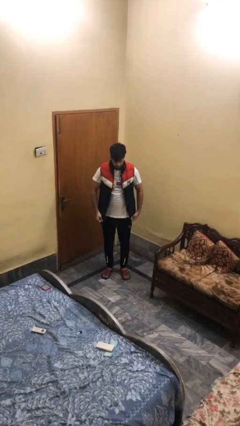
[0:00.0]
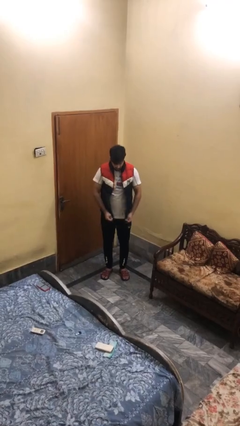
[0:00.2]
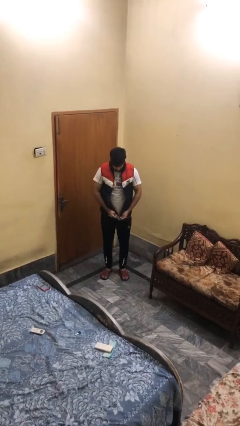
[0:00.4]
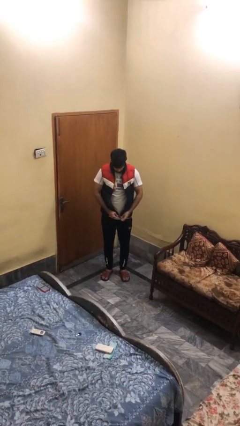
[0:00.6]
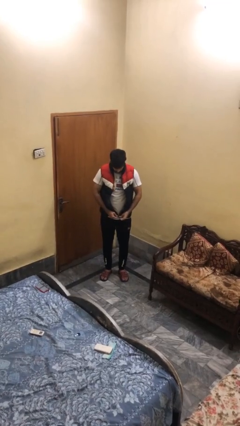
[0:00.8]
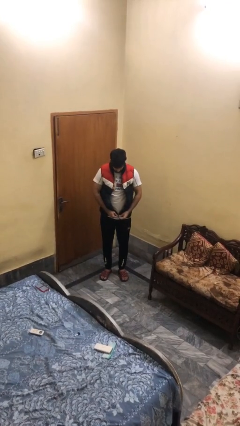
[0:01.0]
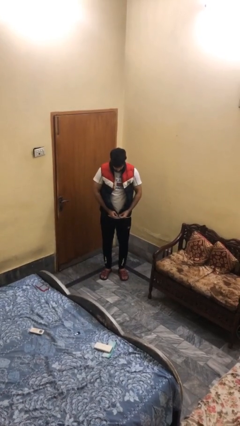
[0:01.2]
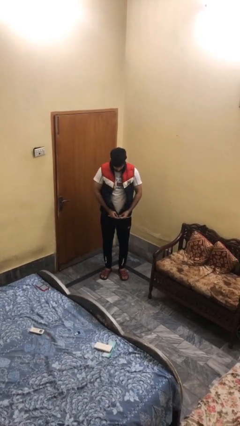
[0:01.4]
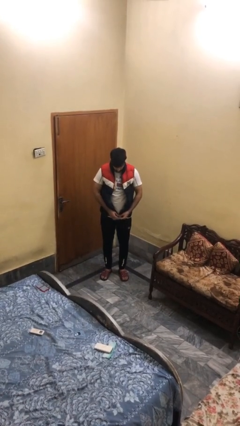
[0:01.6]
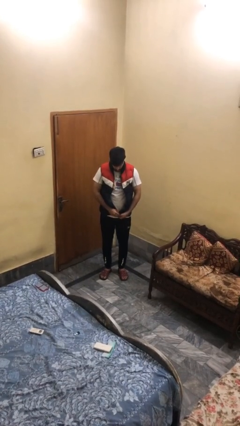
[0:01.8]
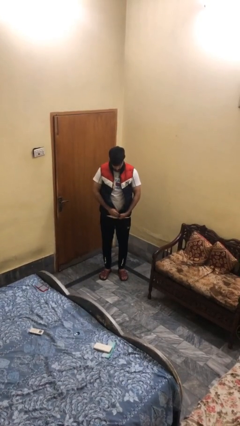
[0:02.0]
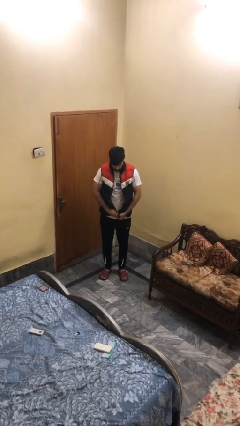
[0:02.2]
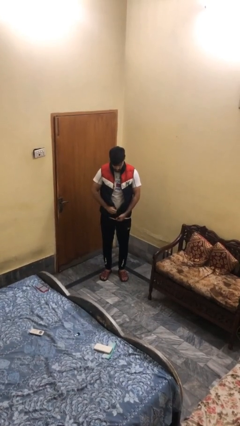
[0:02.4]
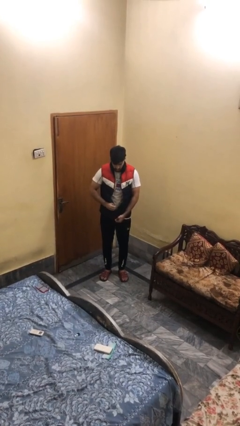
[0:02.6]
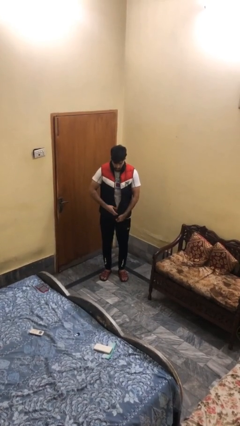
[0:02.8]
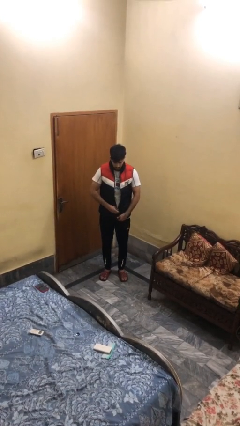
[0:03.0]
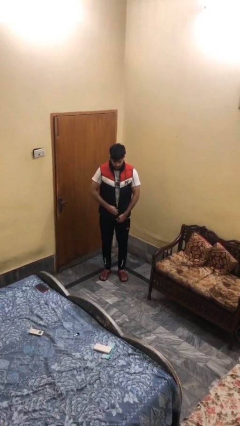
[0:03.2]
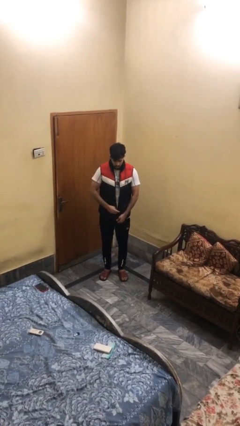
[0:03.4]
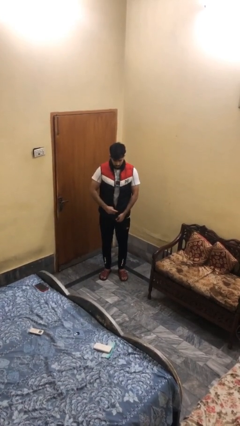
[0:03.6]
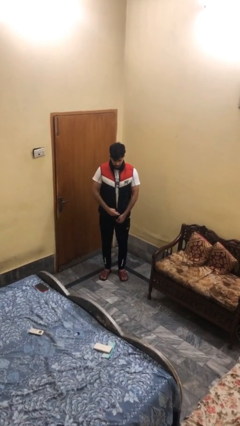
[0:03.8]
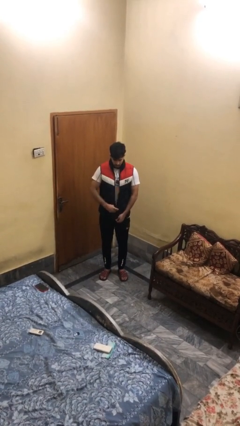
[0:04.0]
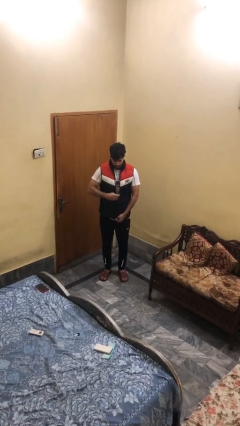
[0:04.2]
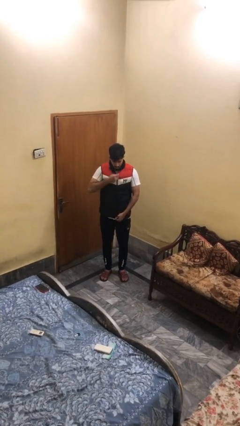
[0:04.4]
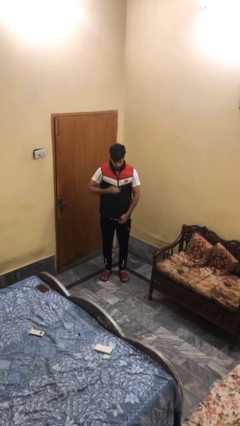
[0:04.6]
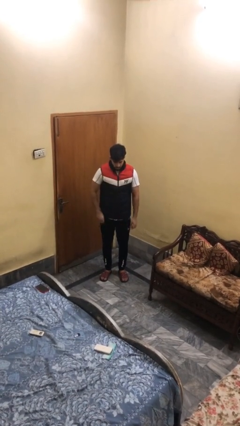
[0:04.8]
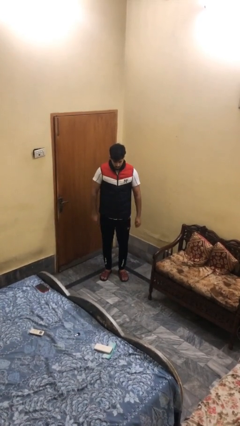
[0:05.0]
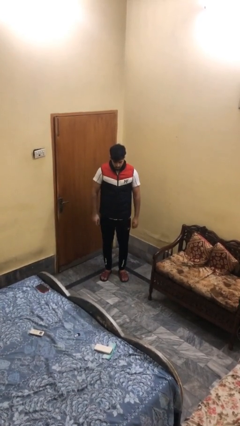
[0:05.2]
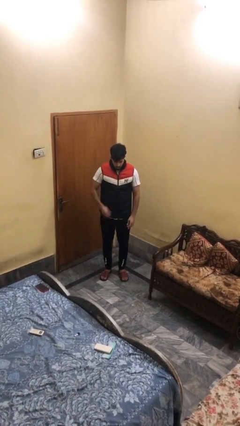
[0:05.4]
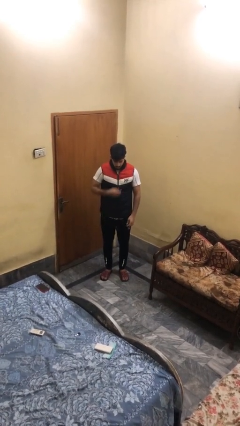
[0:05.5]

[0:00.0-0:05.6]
person zips up jacket

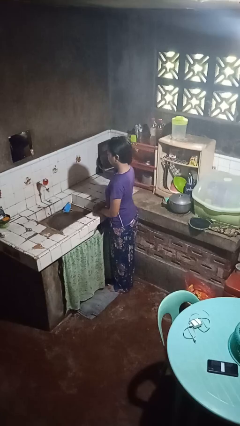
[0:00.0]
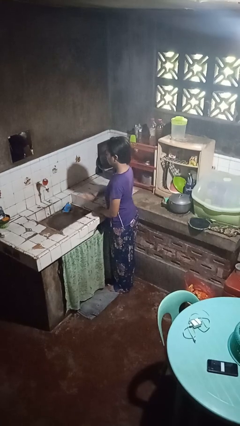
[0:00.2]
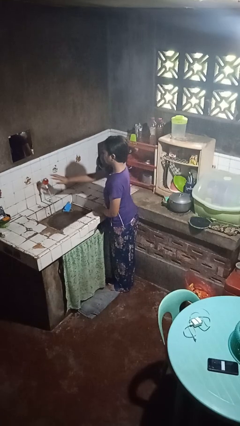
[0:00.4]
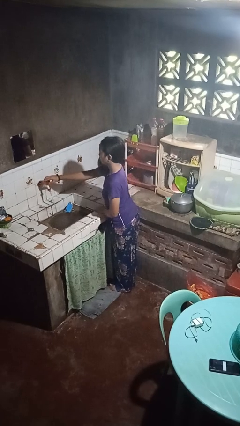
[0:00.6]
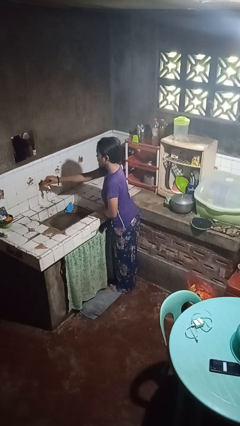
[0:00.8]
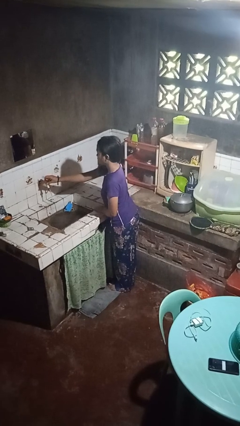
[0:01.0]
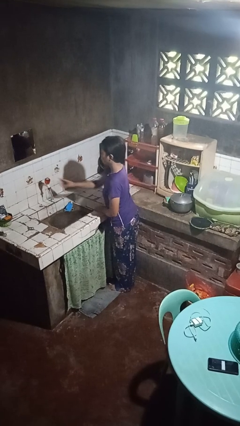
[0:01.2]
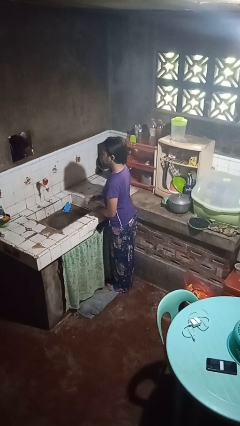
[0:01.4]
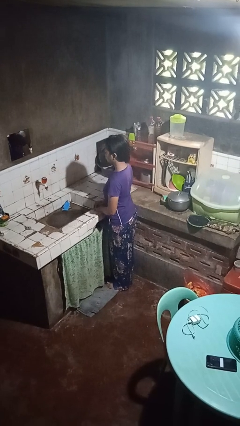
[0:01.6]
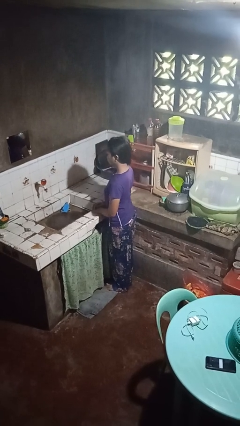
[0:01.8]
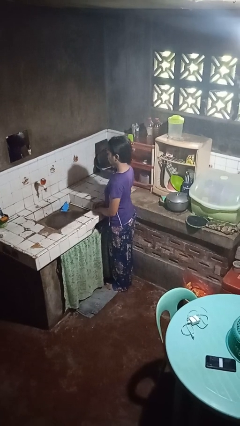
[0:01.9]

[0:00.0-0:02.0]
person turns off faucet

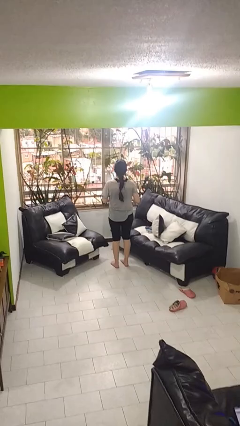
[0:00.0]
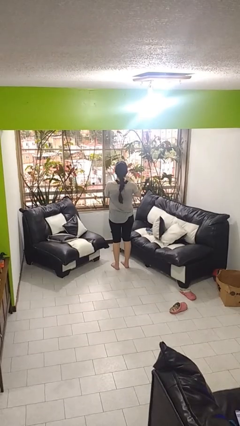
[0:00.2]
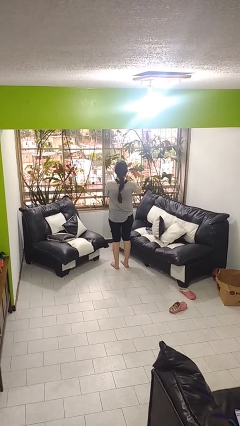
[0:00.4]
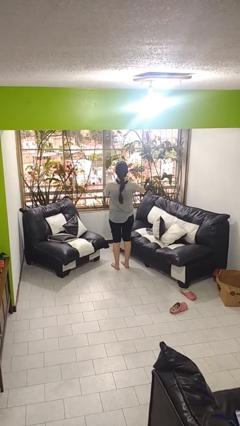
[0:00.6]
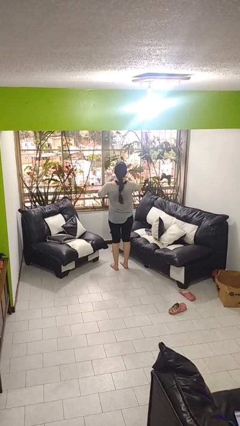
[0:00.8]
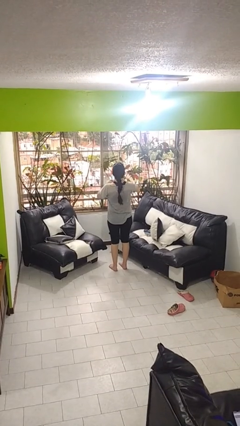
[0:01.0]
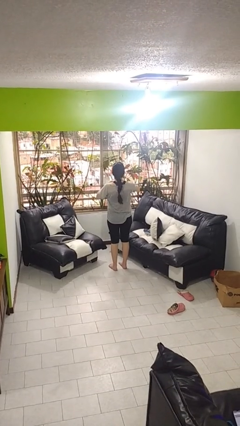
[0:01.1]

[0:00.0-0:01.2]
person wipes mouth with napkin

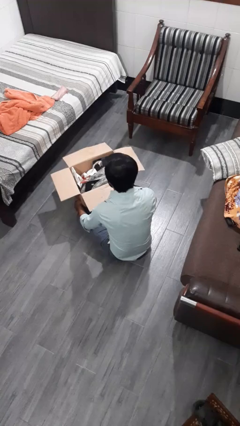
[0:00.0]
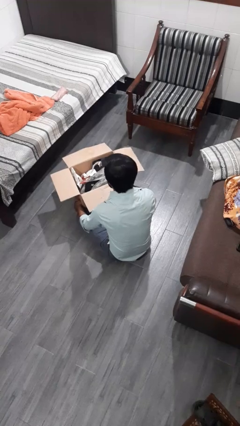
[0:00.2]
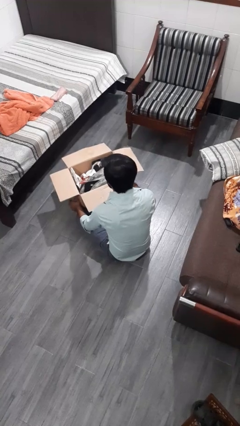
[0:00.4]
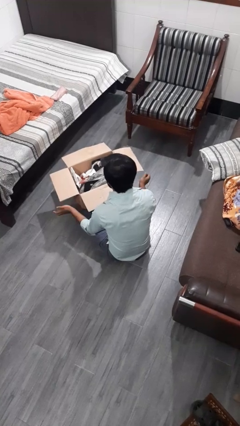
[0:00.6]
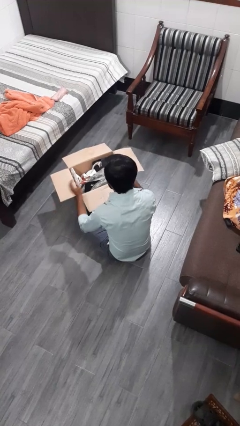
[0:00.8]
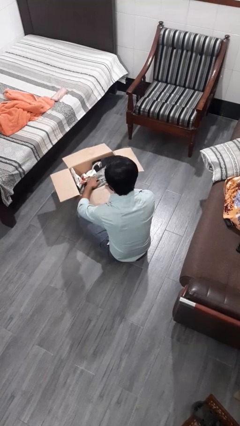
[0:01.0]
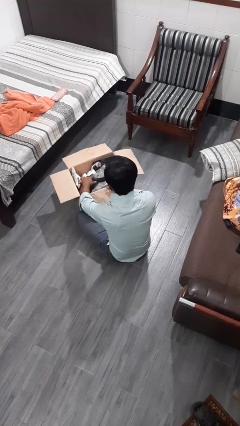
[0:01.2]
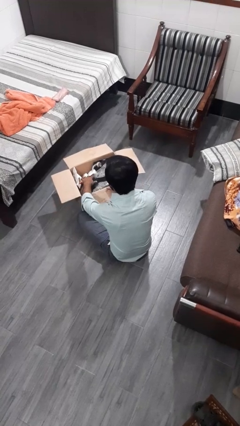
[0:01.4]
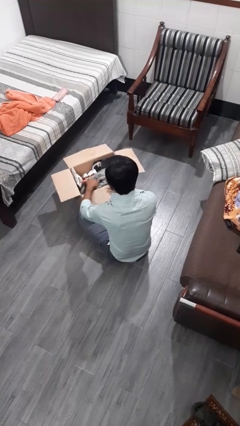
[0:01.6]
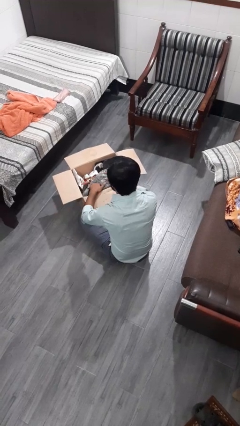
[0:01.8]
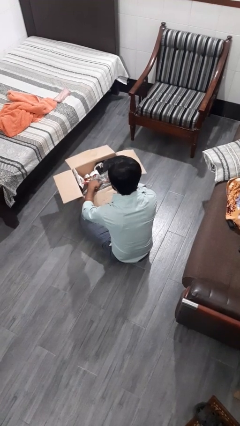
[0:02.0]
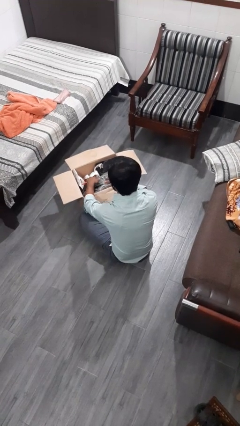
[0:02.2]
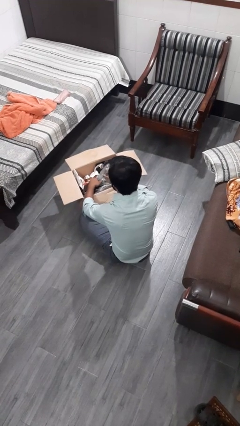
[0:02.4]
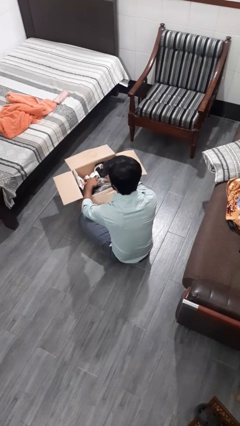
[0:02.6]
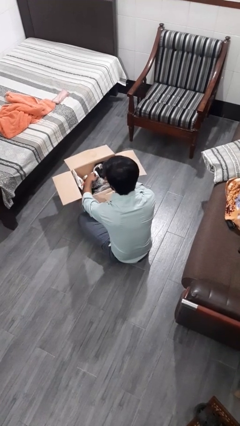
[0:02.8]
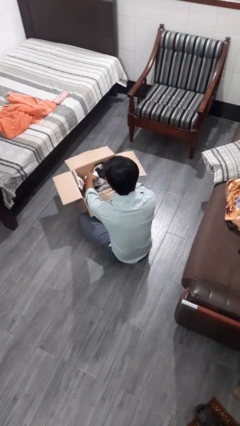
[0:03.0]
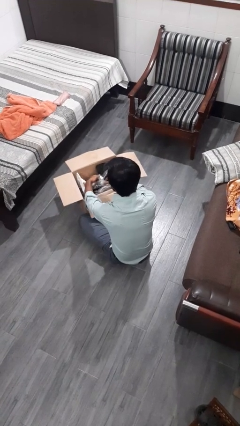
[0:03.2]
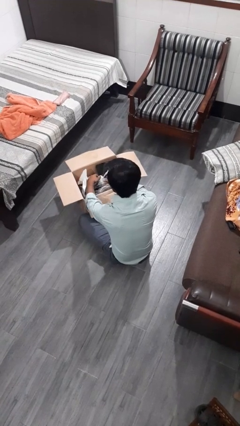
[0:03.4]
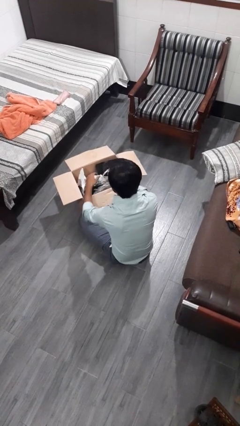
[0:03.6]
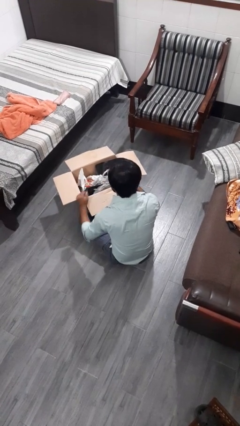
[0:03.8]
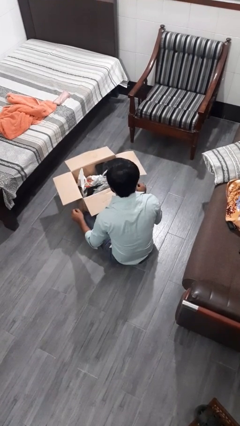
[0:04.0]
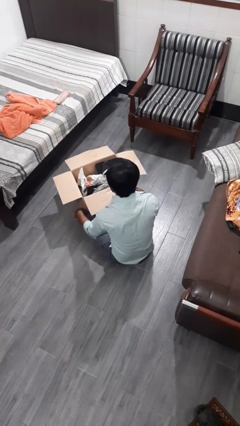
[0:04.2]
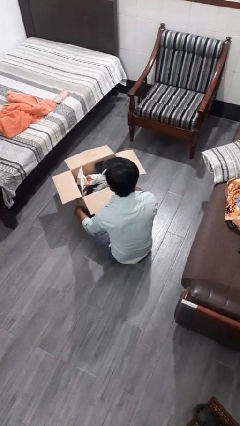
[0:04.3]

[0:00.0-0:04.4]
person searches in box

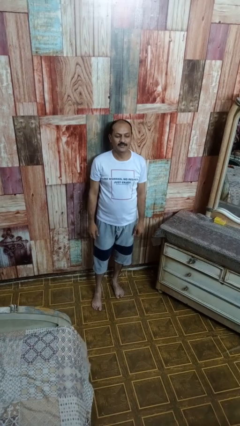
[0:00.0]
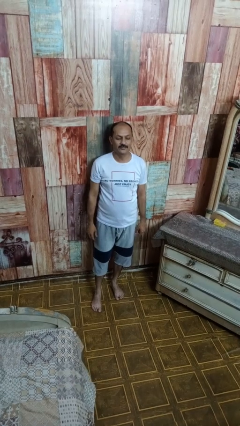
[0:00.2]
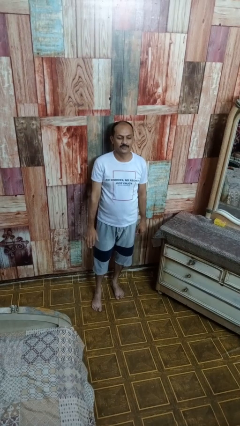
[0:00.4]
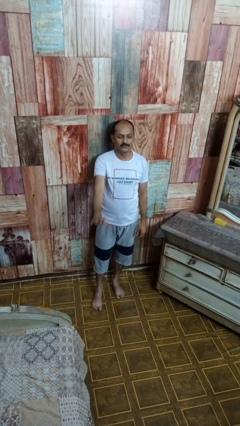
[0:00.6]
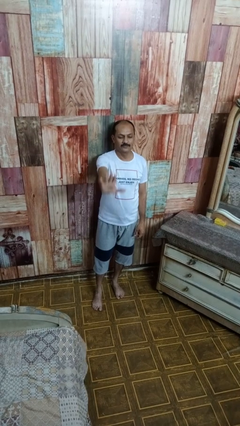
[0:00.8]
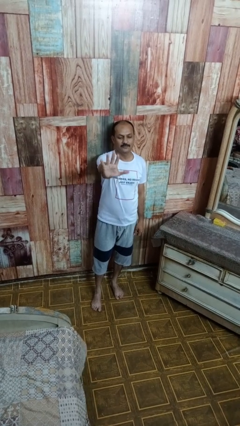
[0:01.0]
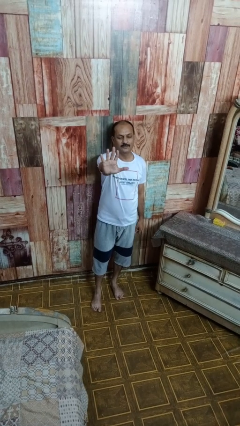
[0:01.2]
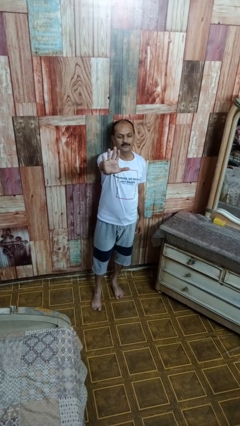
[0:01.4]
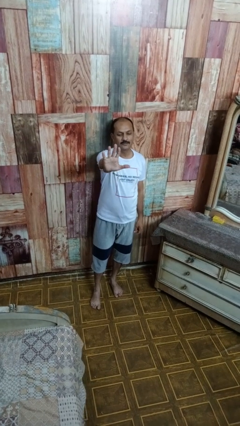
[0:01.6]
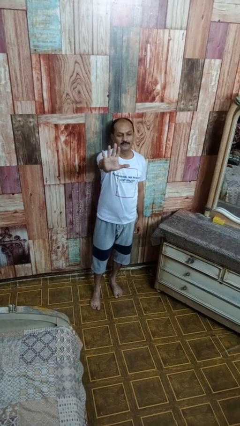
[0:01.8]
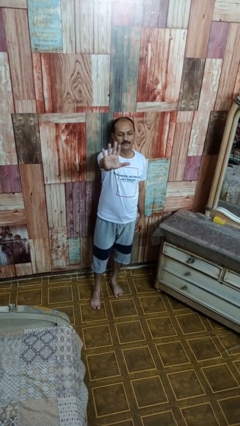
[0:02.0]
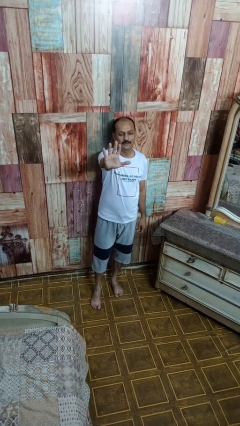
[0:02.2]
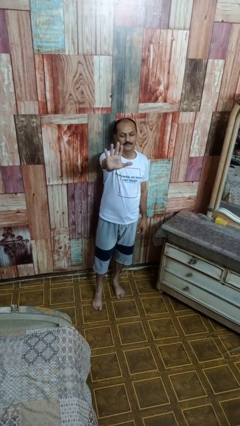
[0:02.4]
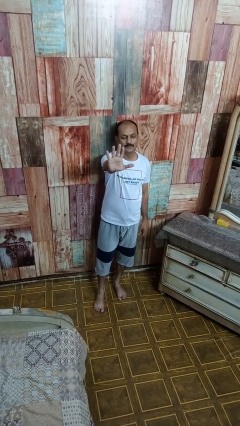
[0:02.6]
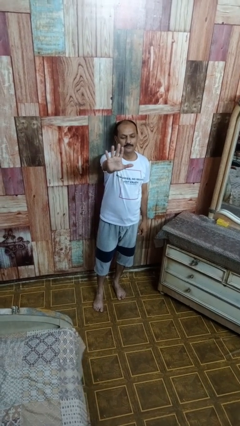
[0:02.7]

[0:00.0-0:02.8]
person gestures number five

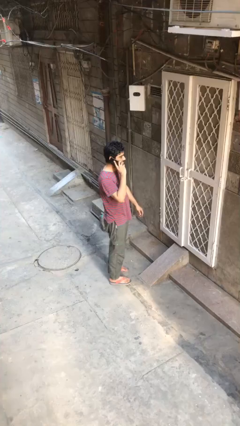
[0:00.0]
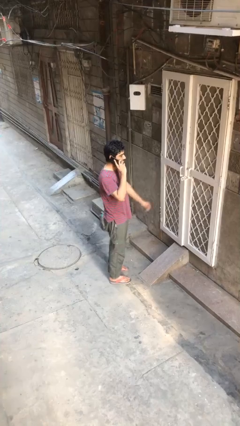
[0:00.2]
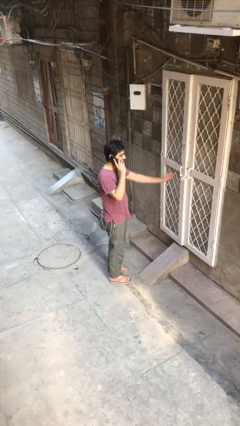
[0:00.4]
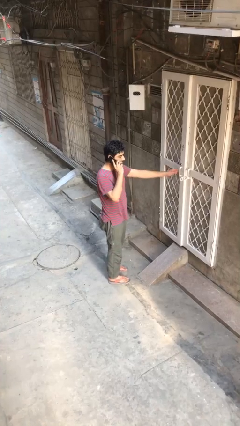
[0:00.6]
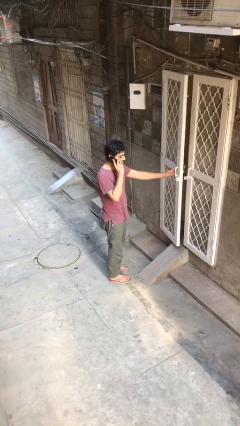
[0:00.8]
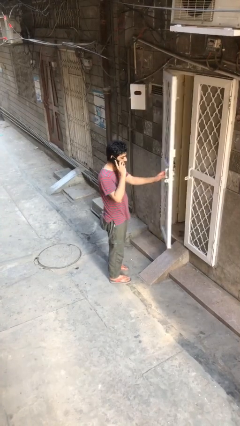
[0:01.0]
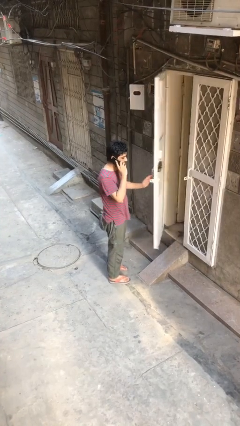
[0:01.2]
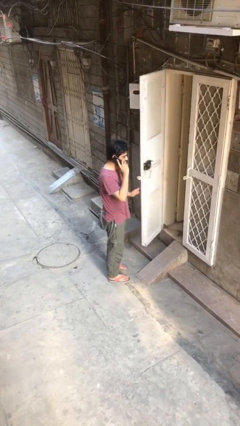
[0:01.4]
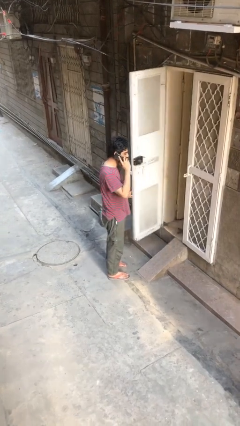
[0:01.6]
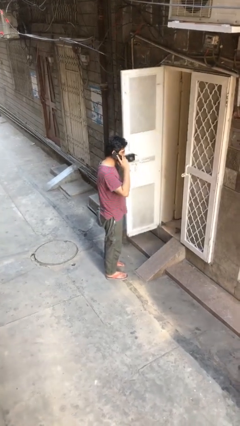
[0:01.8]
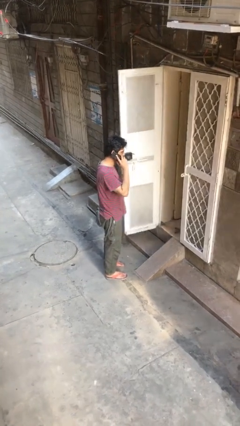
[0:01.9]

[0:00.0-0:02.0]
person opens facility door
